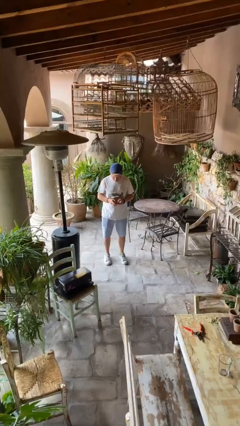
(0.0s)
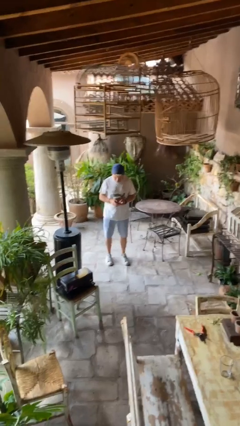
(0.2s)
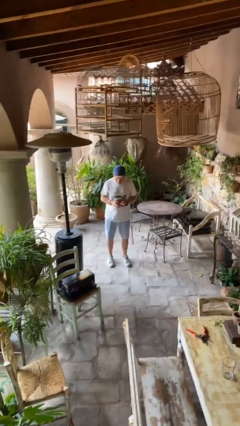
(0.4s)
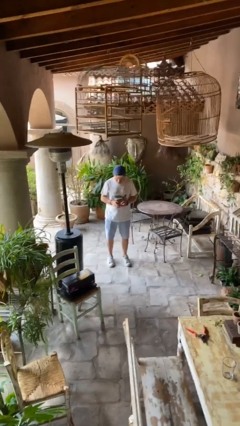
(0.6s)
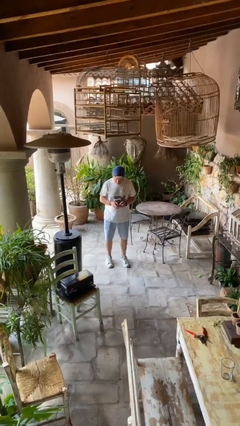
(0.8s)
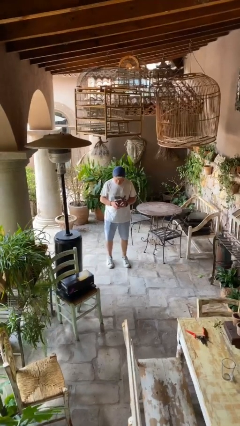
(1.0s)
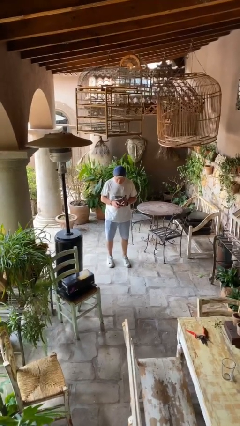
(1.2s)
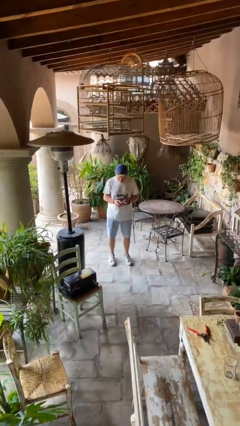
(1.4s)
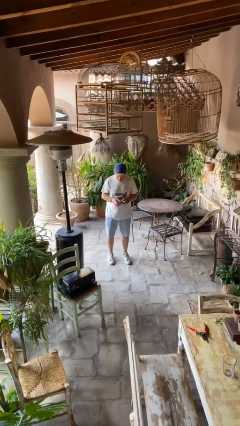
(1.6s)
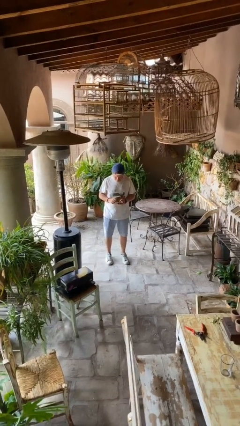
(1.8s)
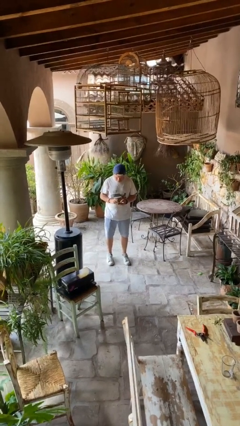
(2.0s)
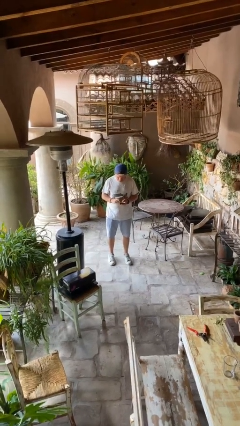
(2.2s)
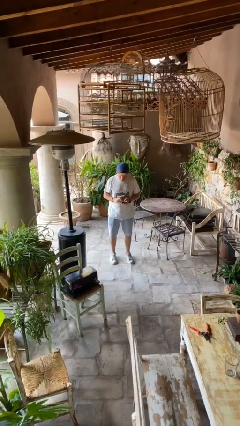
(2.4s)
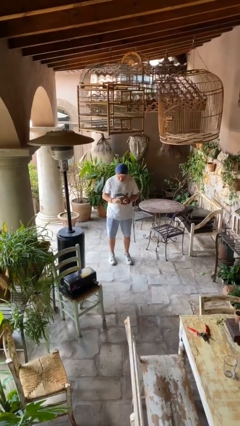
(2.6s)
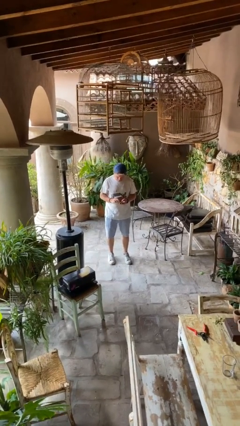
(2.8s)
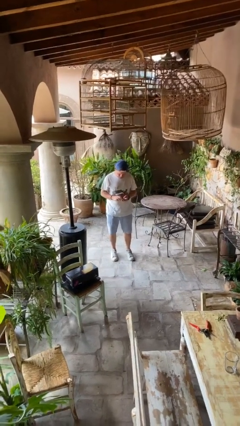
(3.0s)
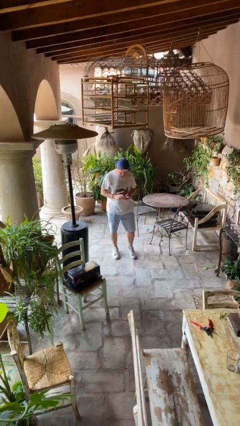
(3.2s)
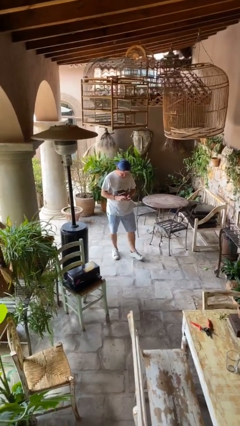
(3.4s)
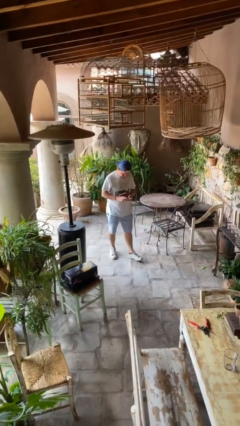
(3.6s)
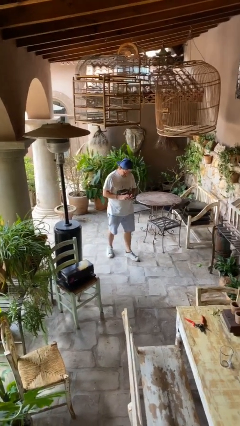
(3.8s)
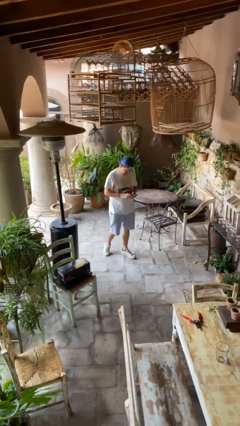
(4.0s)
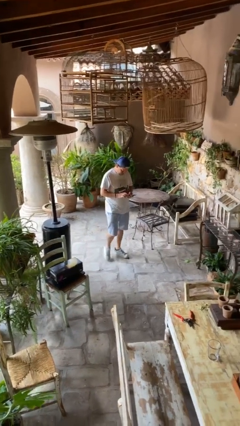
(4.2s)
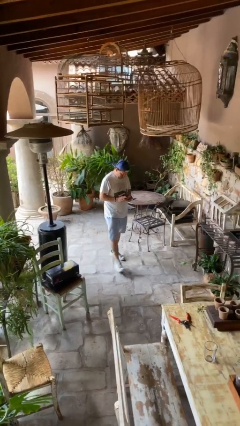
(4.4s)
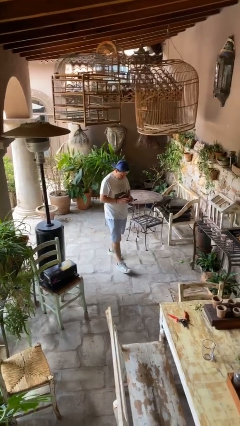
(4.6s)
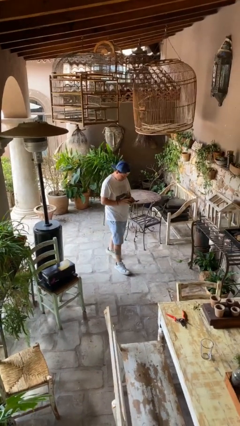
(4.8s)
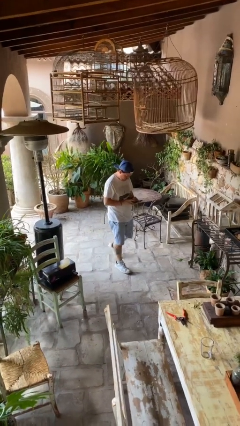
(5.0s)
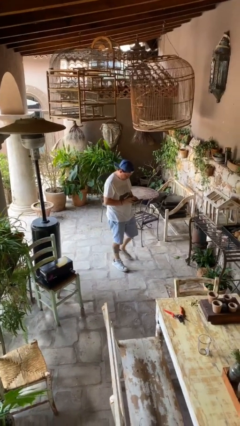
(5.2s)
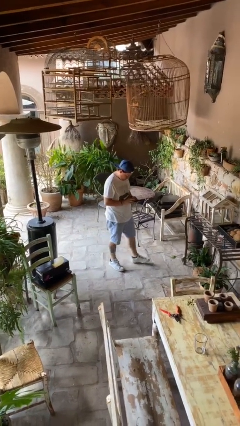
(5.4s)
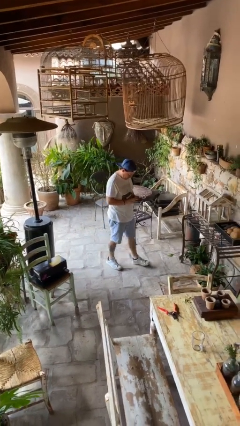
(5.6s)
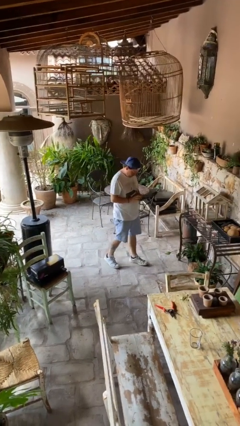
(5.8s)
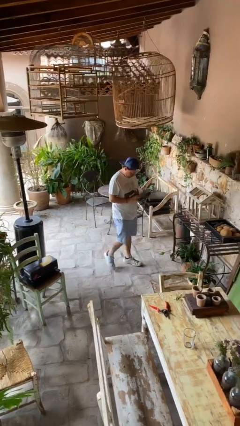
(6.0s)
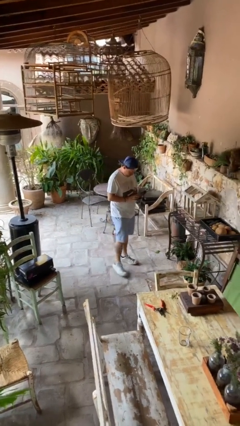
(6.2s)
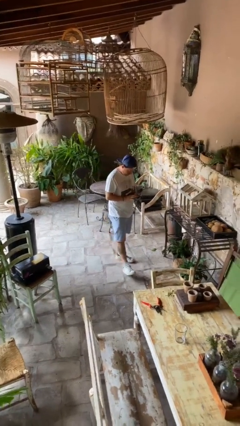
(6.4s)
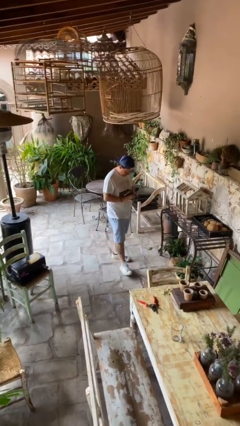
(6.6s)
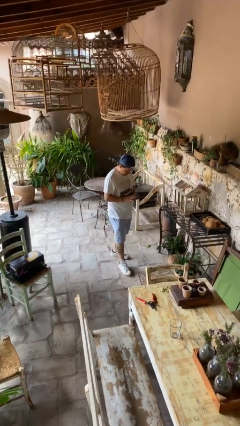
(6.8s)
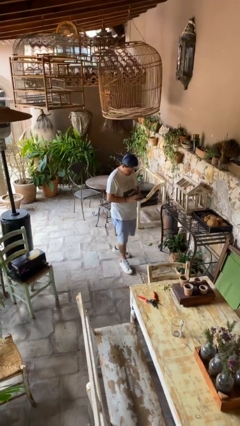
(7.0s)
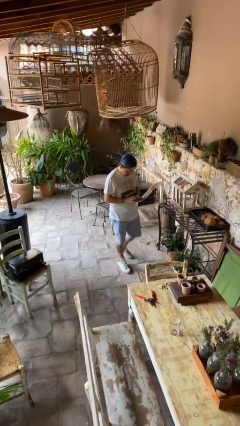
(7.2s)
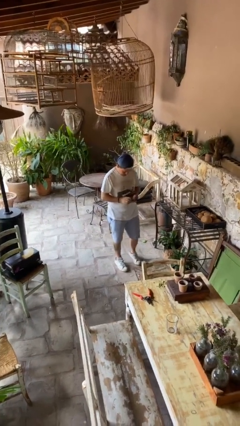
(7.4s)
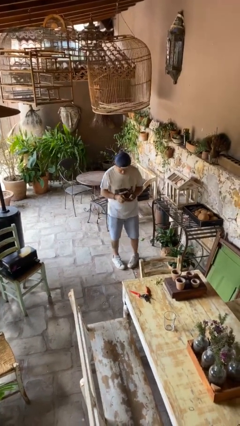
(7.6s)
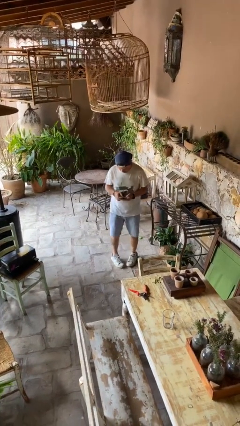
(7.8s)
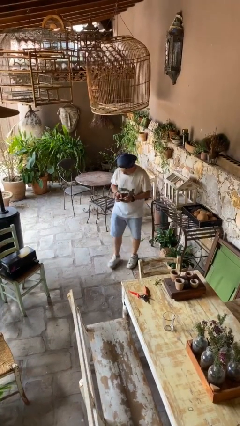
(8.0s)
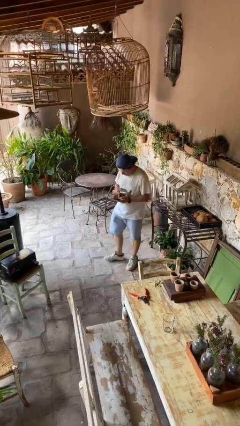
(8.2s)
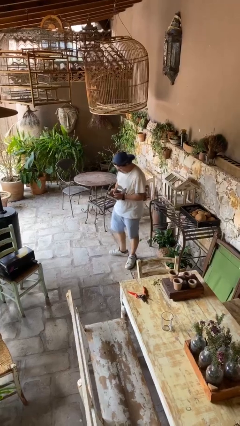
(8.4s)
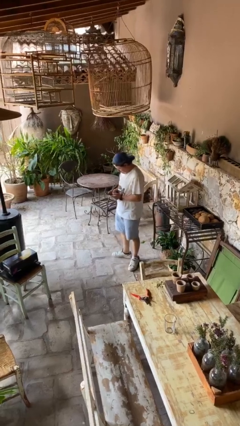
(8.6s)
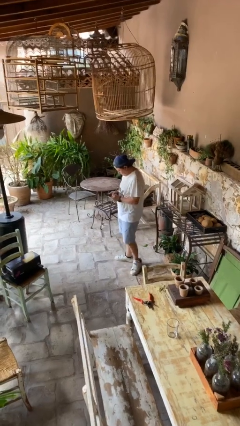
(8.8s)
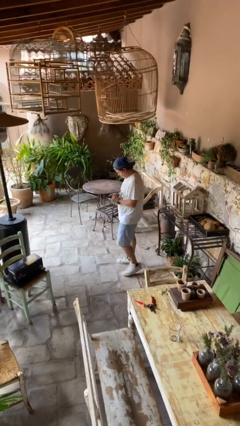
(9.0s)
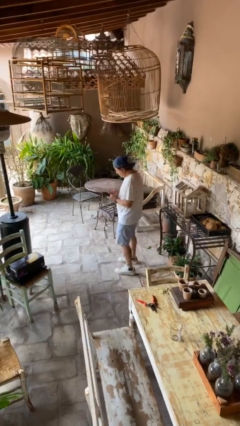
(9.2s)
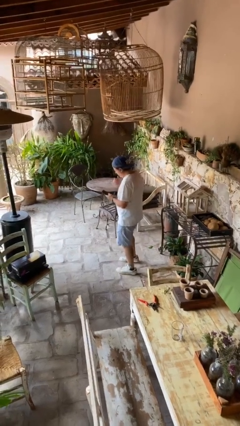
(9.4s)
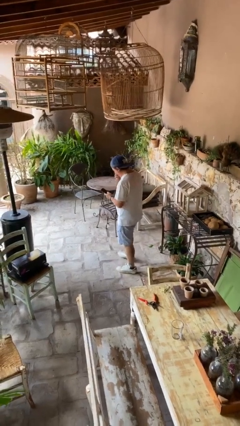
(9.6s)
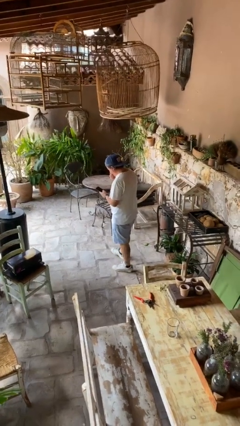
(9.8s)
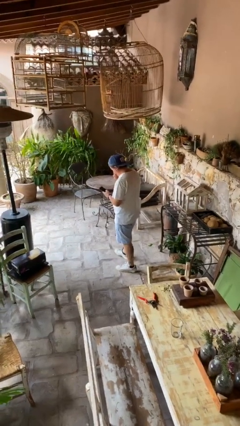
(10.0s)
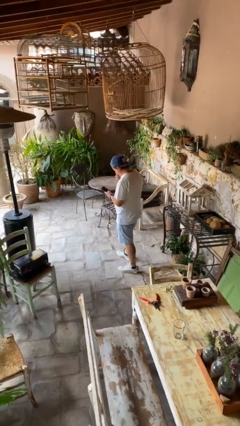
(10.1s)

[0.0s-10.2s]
person texts on phone

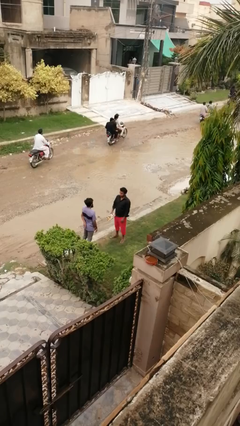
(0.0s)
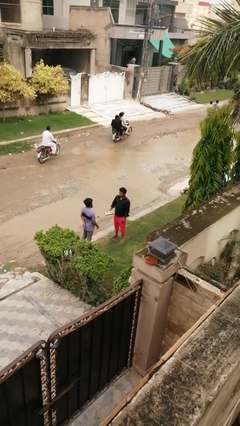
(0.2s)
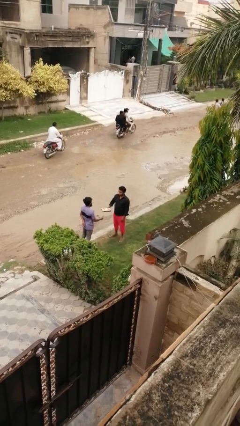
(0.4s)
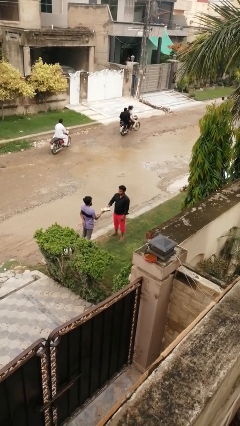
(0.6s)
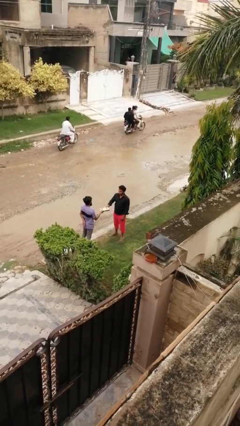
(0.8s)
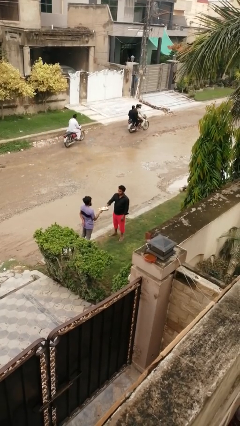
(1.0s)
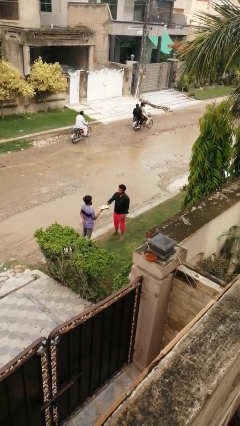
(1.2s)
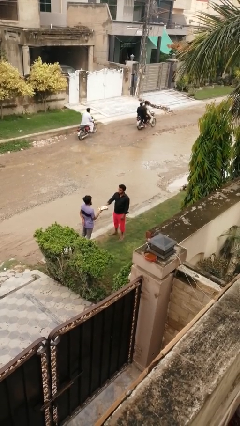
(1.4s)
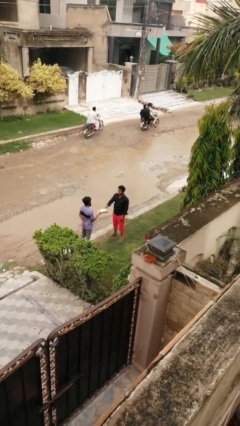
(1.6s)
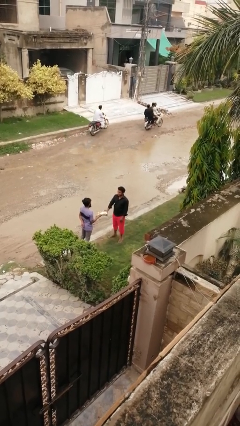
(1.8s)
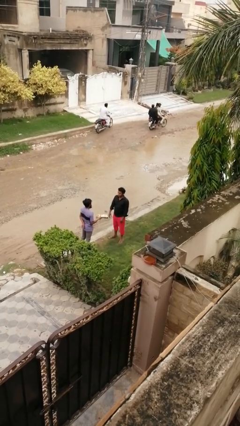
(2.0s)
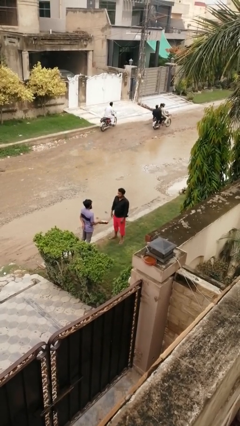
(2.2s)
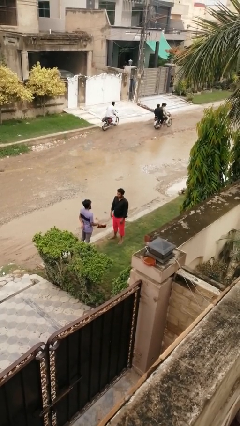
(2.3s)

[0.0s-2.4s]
person transfers object to person

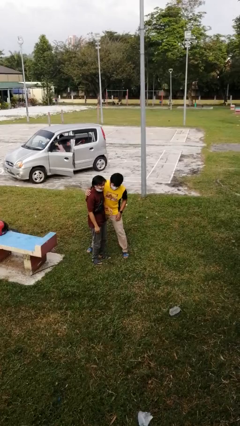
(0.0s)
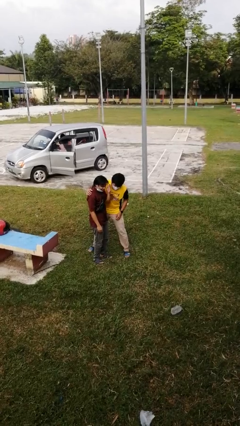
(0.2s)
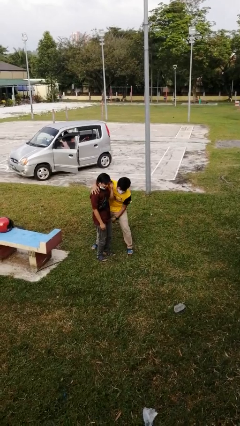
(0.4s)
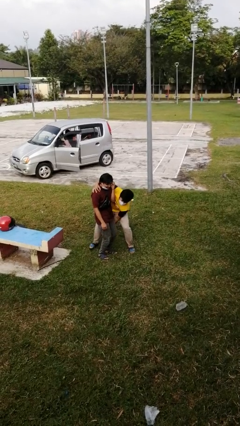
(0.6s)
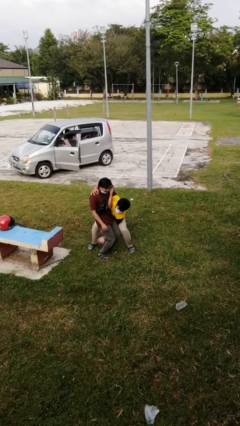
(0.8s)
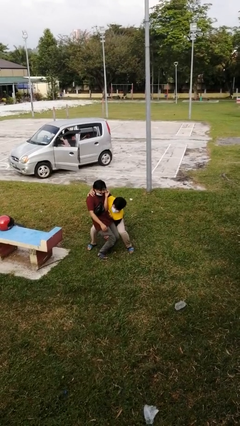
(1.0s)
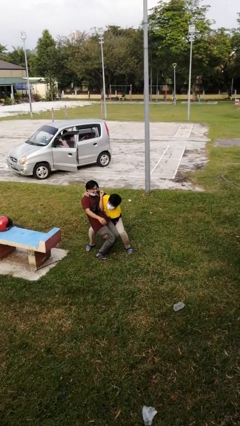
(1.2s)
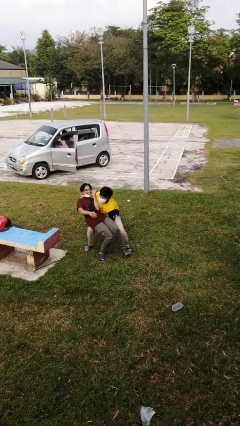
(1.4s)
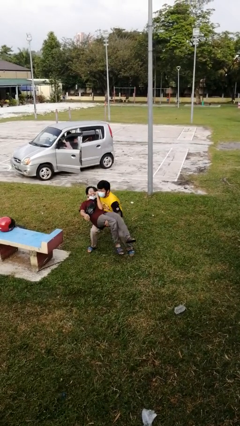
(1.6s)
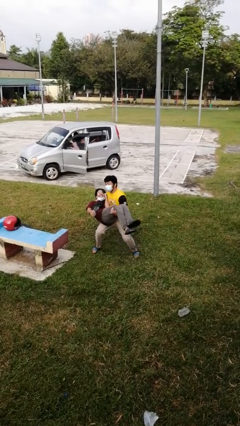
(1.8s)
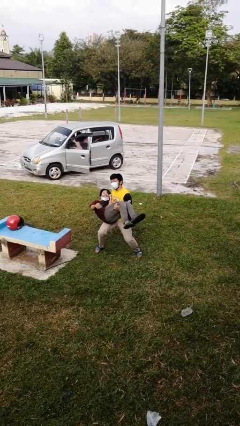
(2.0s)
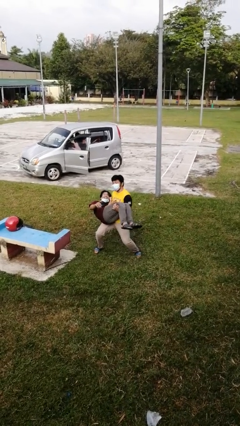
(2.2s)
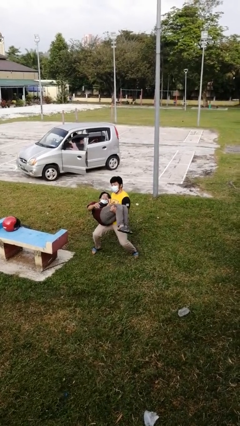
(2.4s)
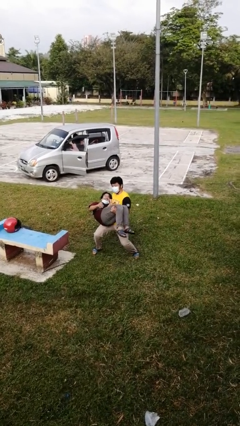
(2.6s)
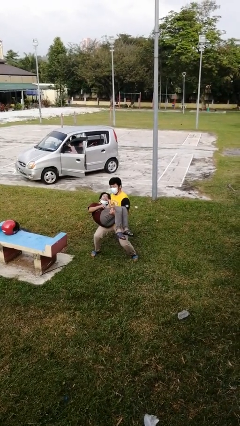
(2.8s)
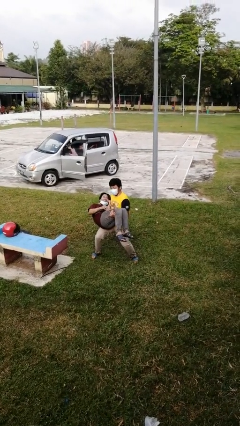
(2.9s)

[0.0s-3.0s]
person picks up person

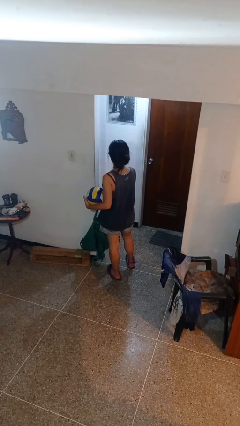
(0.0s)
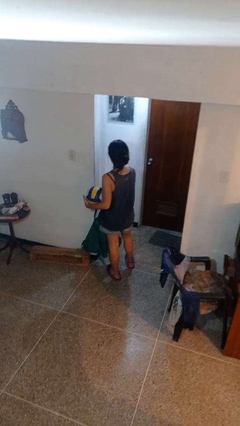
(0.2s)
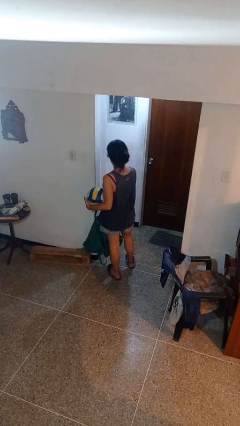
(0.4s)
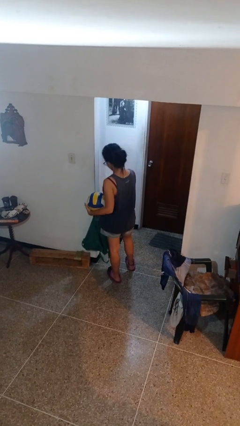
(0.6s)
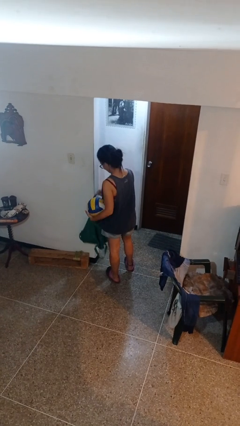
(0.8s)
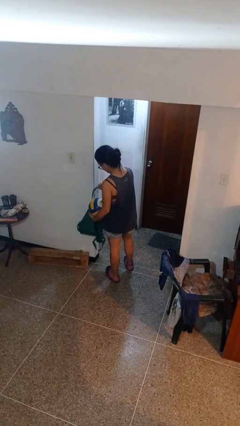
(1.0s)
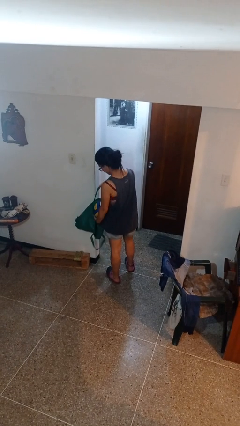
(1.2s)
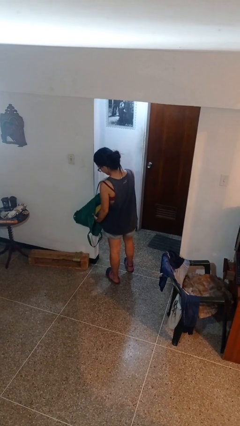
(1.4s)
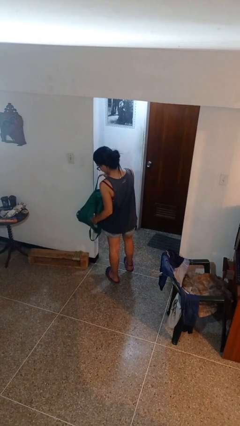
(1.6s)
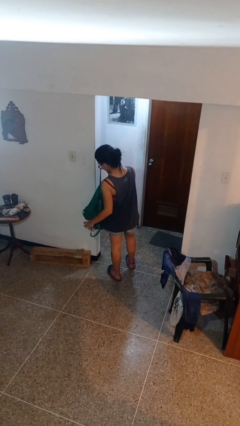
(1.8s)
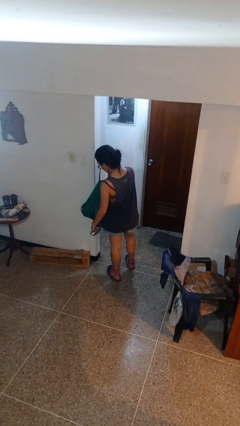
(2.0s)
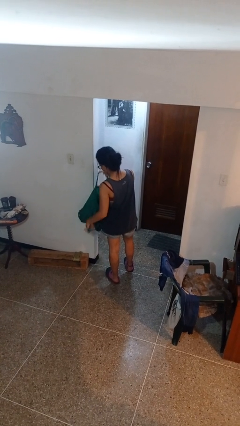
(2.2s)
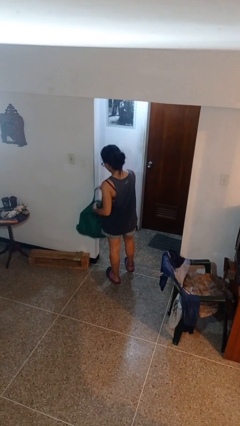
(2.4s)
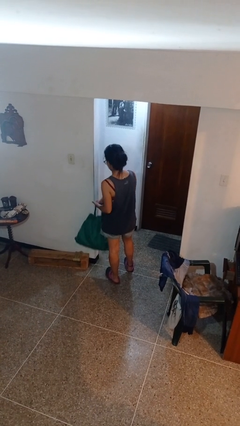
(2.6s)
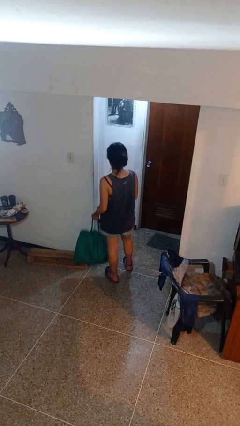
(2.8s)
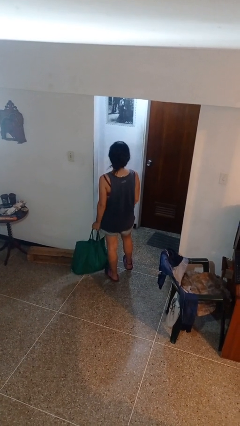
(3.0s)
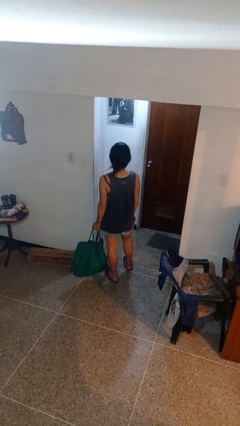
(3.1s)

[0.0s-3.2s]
person puts object into bag
